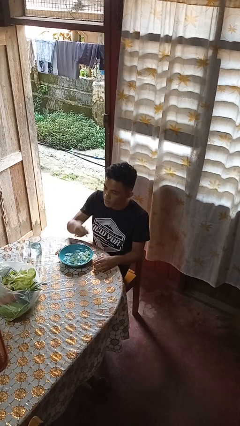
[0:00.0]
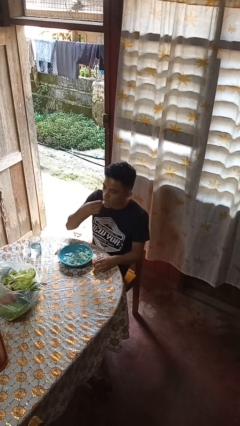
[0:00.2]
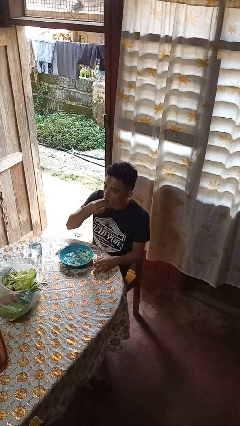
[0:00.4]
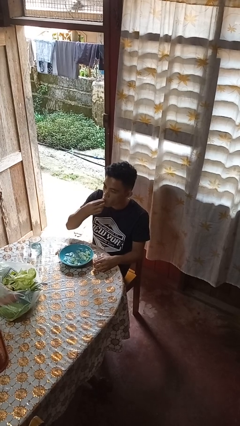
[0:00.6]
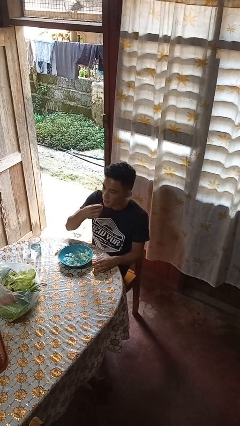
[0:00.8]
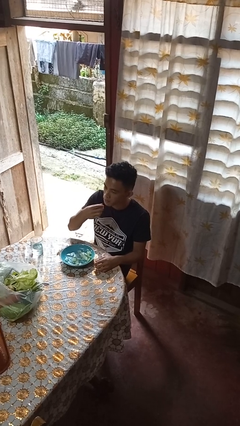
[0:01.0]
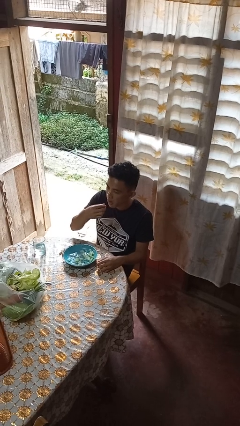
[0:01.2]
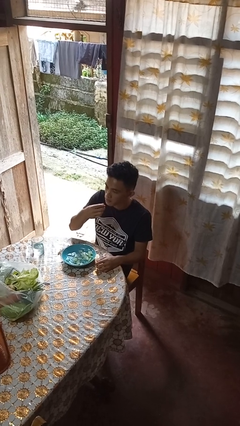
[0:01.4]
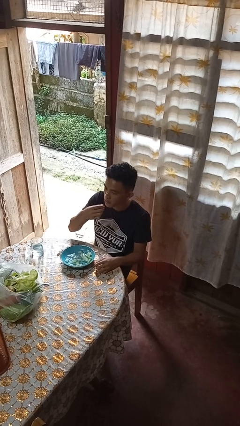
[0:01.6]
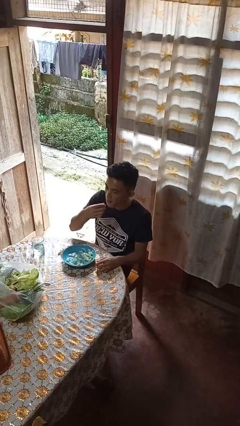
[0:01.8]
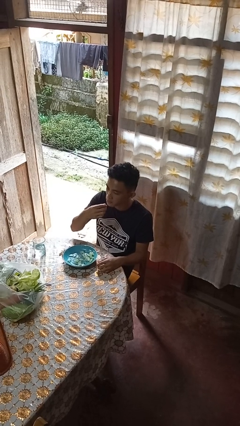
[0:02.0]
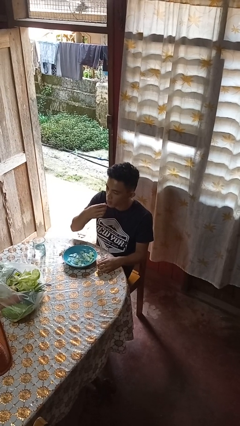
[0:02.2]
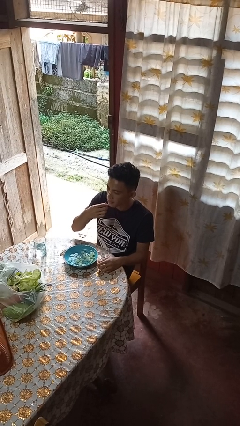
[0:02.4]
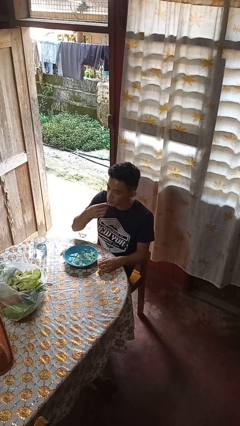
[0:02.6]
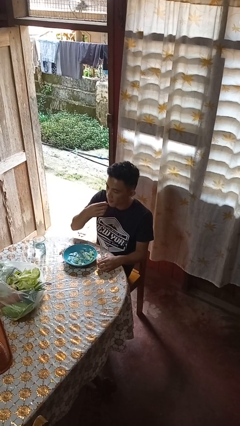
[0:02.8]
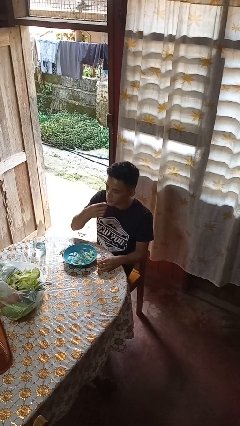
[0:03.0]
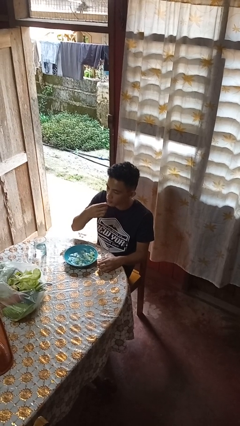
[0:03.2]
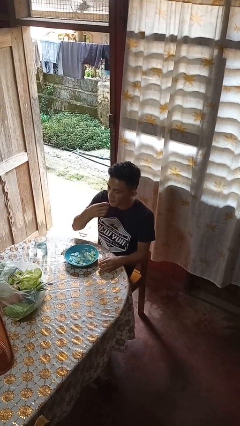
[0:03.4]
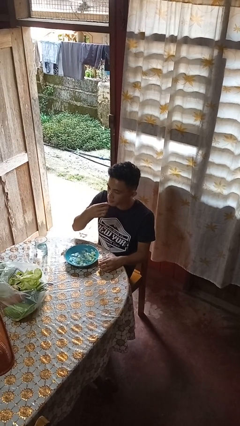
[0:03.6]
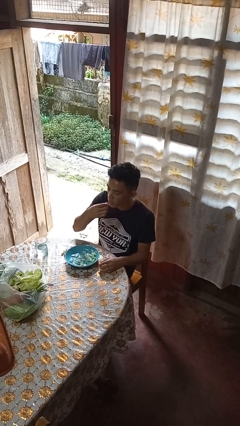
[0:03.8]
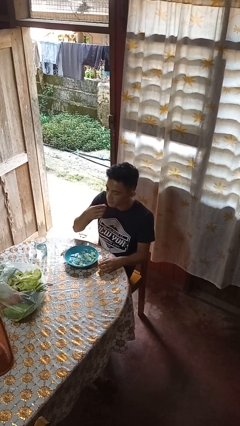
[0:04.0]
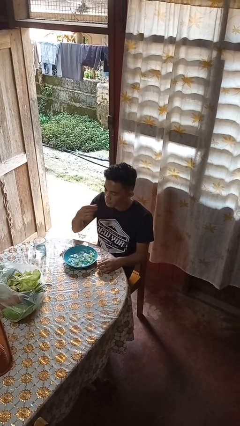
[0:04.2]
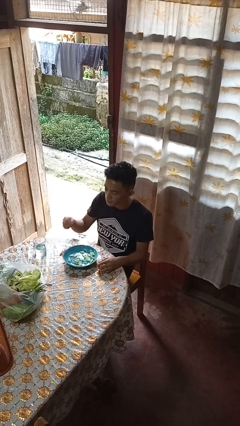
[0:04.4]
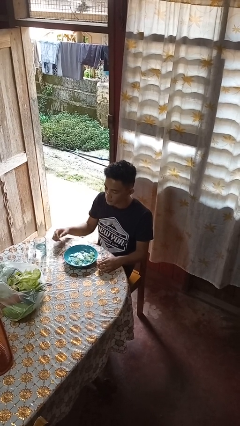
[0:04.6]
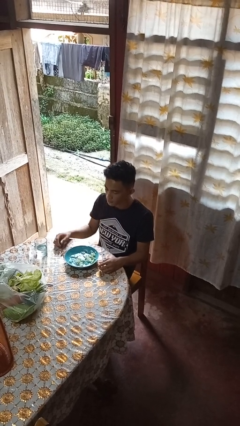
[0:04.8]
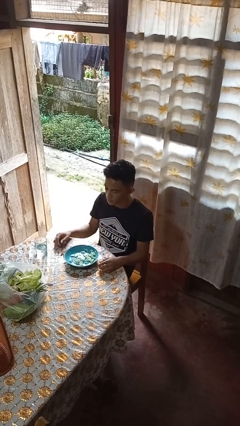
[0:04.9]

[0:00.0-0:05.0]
person eats with hands

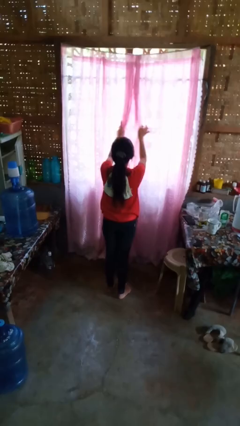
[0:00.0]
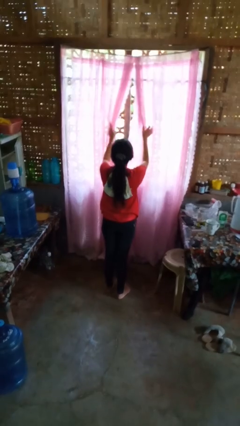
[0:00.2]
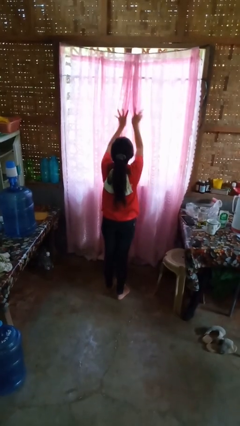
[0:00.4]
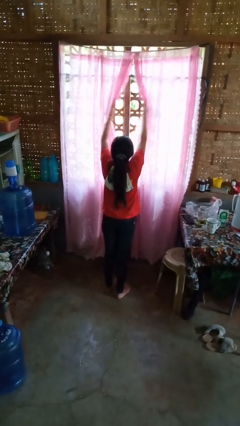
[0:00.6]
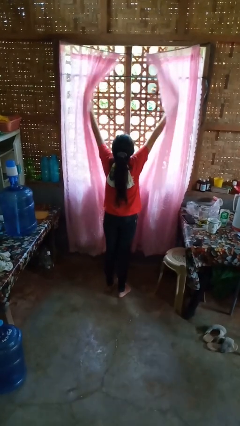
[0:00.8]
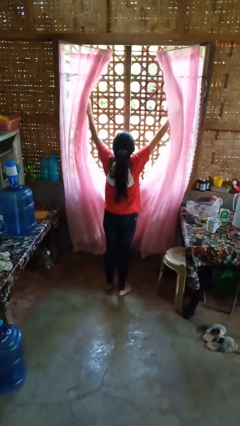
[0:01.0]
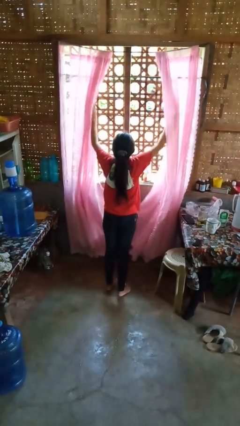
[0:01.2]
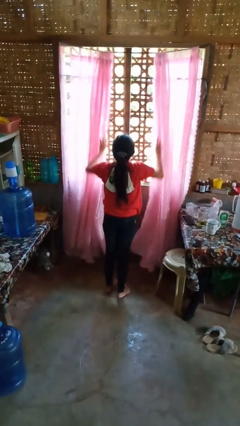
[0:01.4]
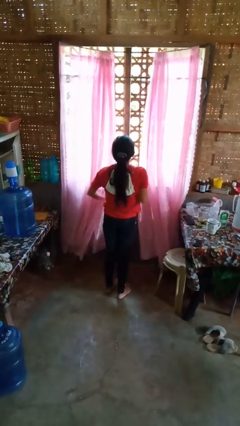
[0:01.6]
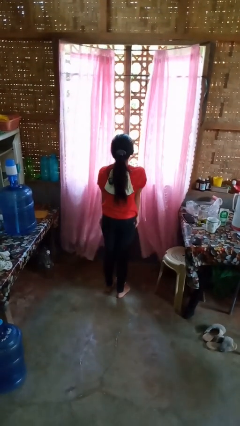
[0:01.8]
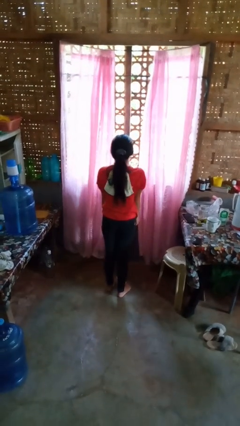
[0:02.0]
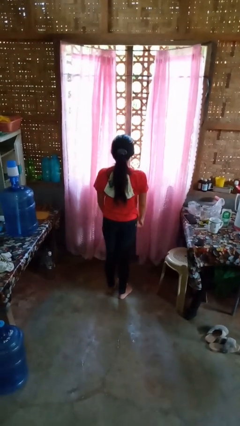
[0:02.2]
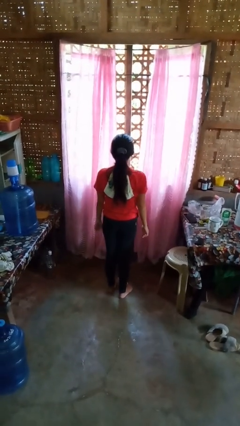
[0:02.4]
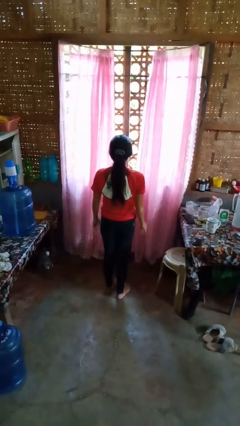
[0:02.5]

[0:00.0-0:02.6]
person opens curtains

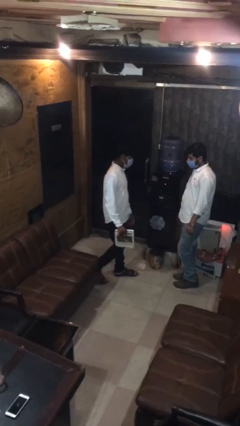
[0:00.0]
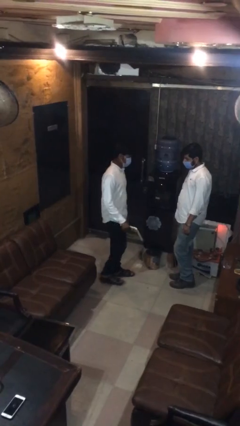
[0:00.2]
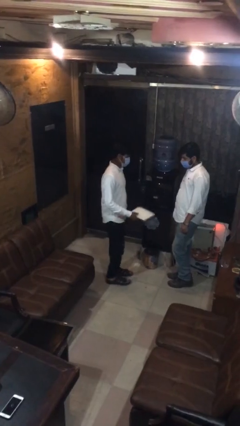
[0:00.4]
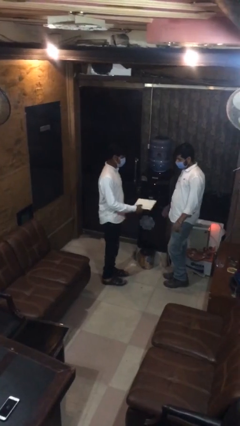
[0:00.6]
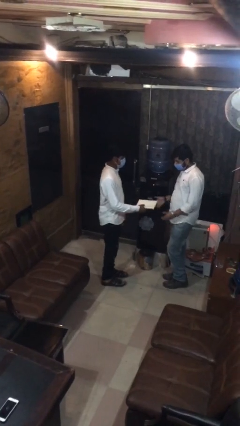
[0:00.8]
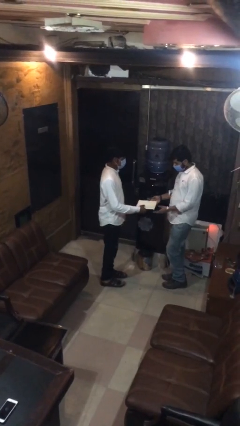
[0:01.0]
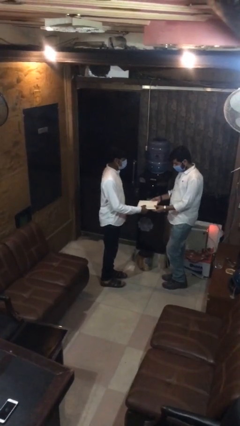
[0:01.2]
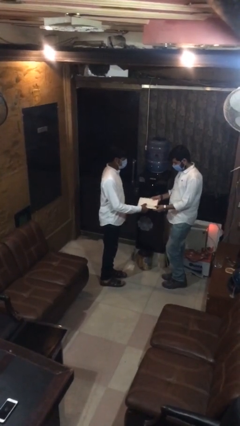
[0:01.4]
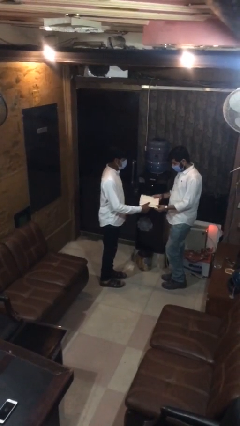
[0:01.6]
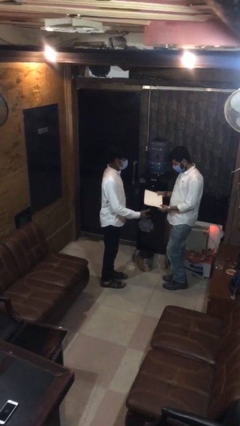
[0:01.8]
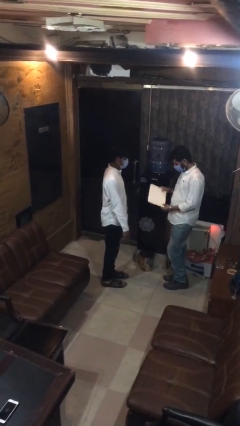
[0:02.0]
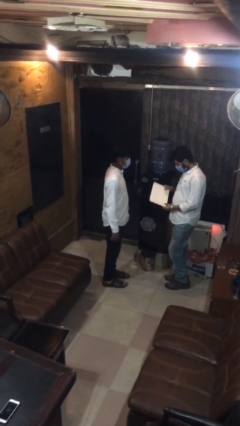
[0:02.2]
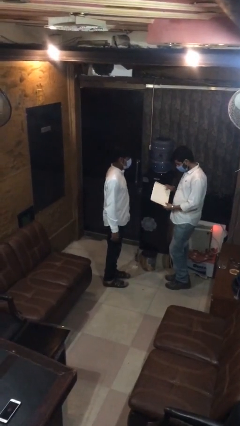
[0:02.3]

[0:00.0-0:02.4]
person transfers object to person

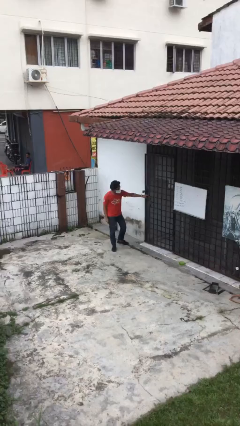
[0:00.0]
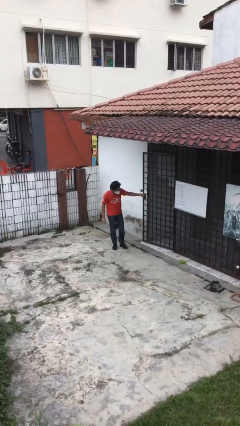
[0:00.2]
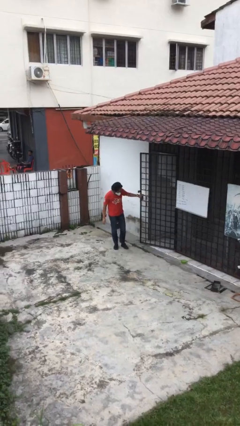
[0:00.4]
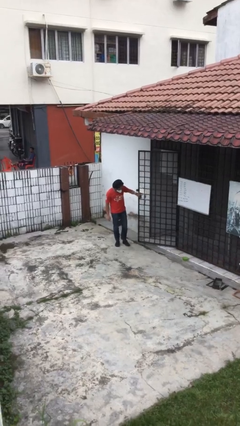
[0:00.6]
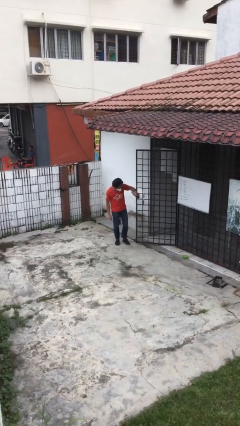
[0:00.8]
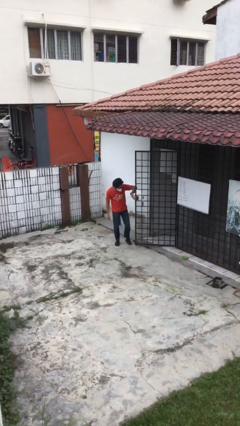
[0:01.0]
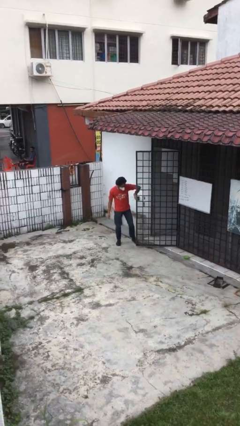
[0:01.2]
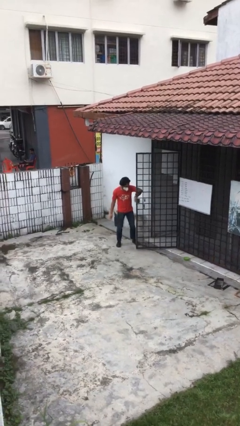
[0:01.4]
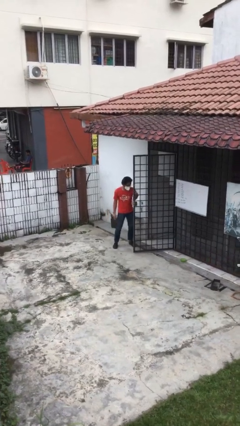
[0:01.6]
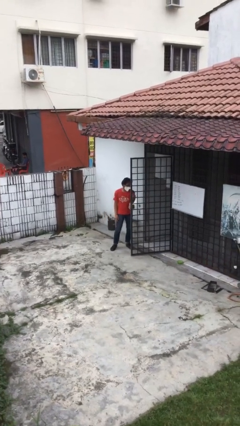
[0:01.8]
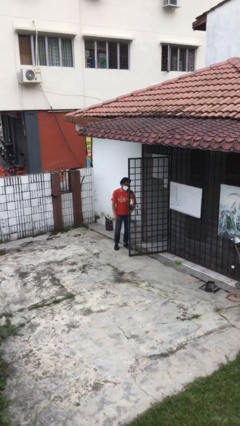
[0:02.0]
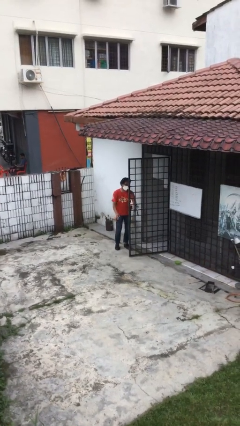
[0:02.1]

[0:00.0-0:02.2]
person opens facility door

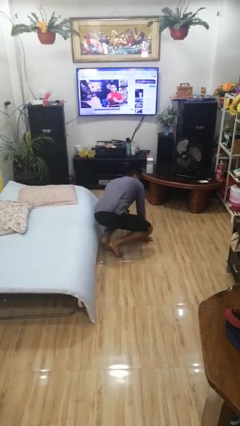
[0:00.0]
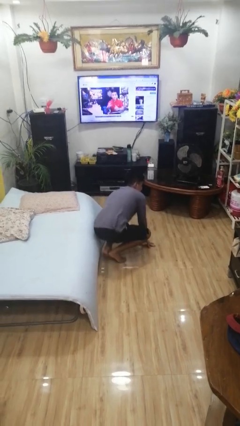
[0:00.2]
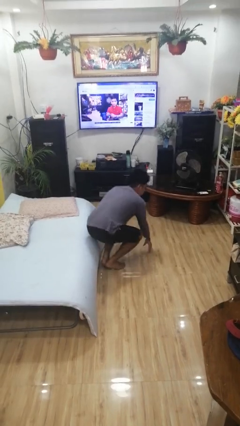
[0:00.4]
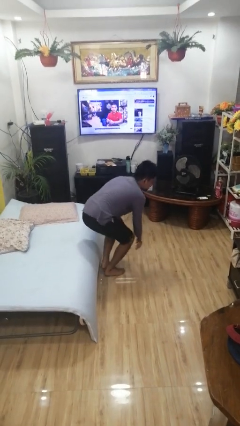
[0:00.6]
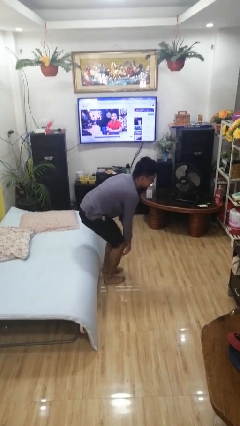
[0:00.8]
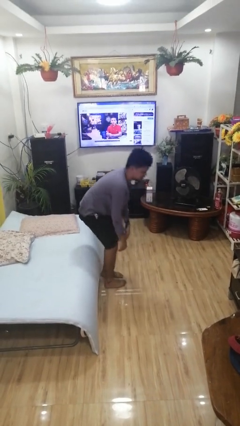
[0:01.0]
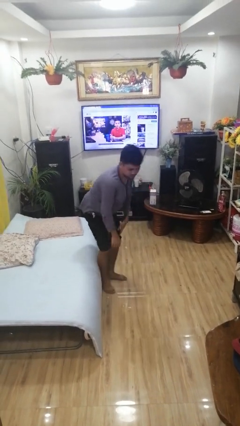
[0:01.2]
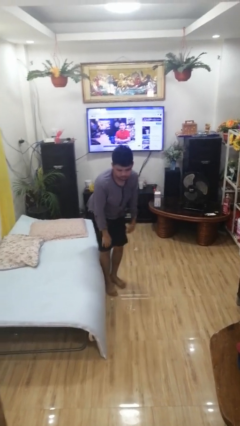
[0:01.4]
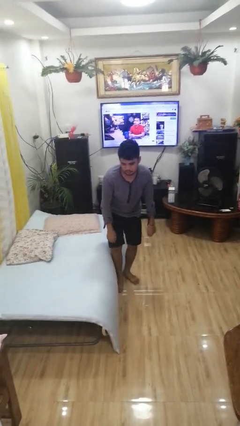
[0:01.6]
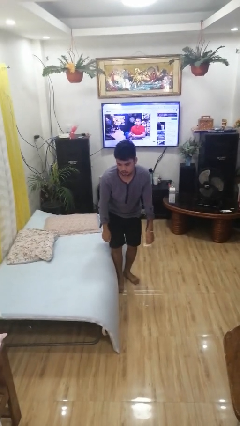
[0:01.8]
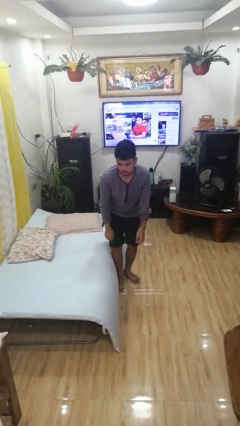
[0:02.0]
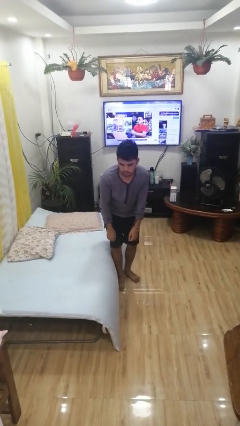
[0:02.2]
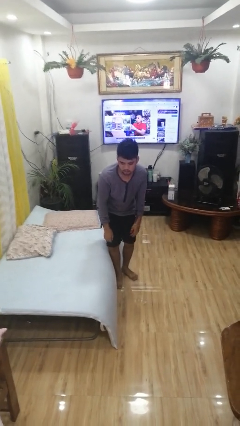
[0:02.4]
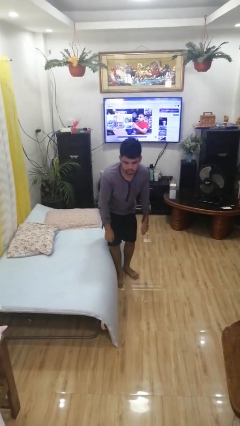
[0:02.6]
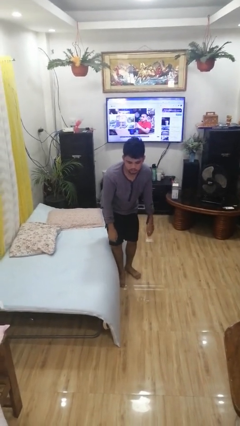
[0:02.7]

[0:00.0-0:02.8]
person stands up from floor

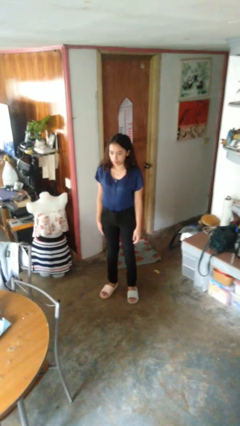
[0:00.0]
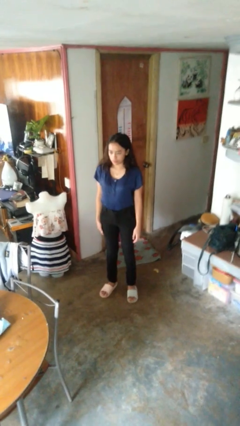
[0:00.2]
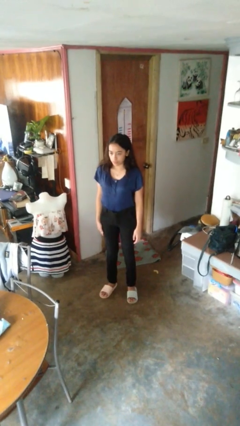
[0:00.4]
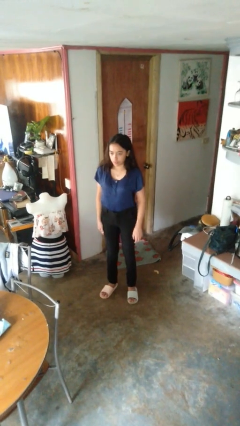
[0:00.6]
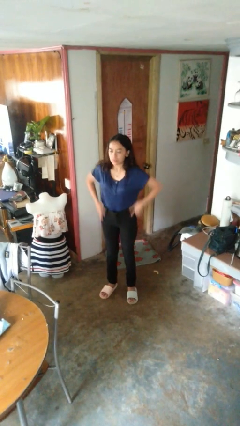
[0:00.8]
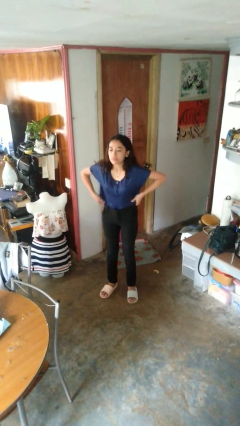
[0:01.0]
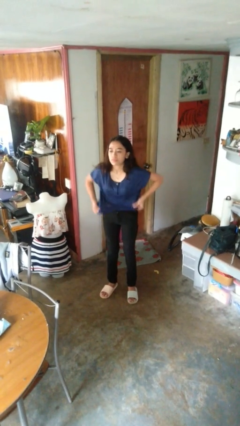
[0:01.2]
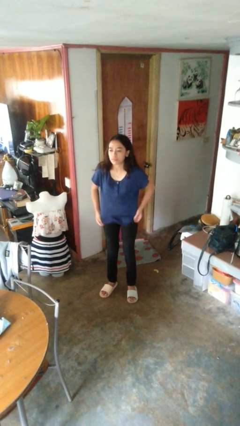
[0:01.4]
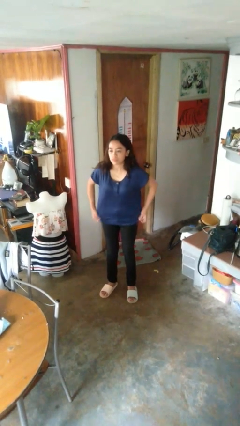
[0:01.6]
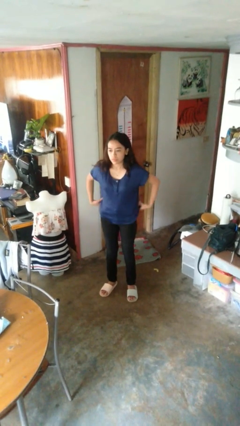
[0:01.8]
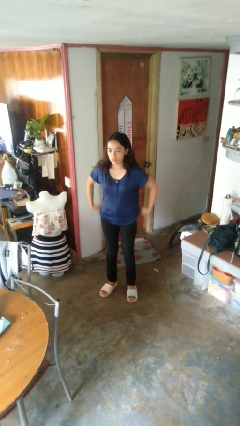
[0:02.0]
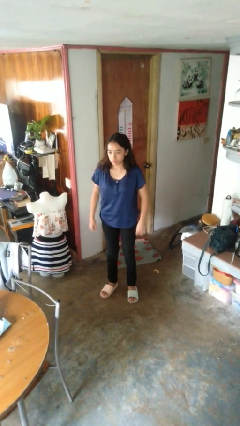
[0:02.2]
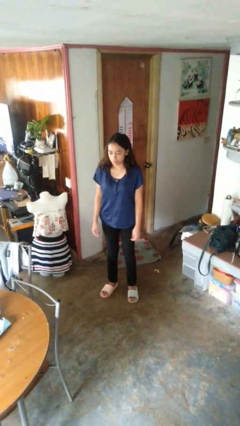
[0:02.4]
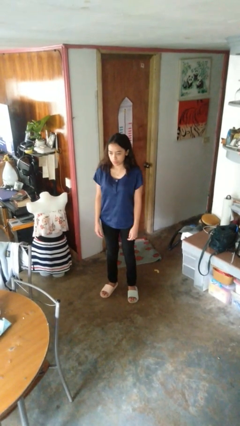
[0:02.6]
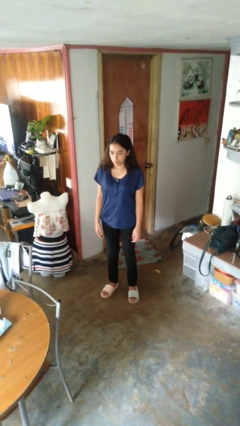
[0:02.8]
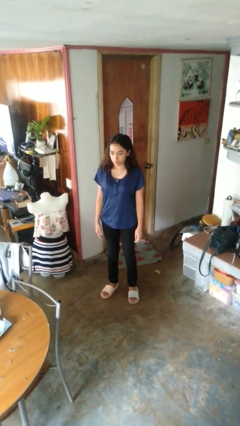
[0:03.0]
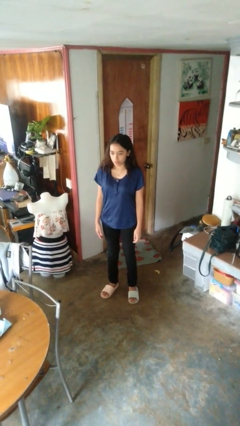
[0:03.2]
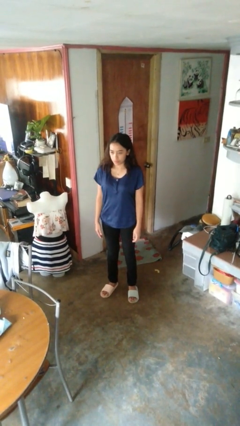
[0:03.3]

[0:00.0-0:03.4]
person untucks shirt
